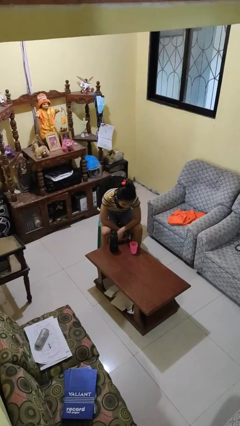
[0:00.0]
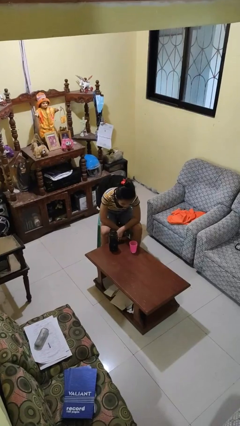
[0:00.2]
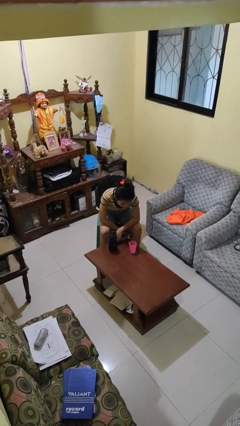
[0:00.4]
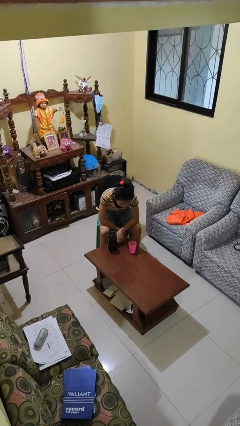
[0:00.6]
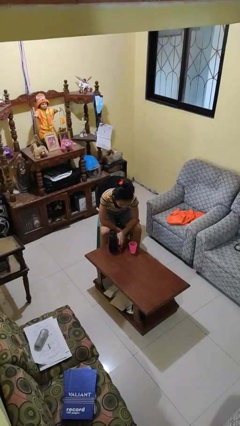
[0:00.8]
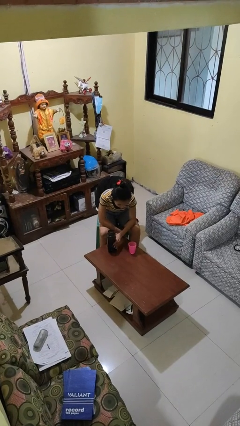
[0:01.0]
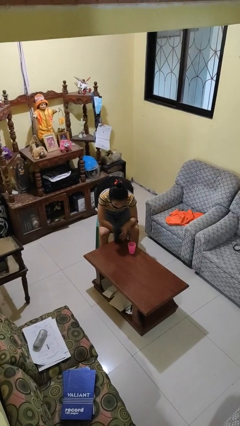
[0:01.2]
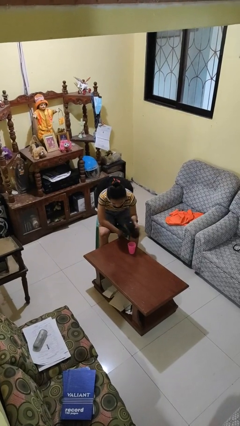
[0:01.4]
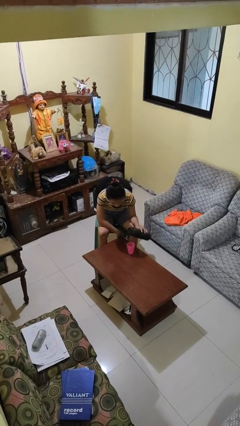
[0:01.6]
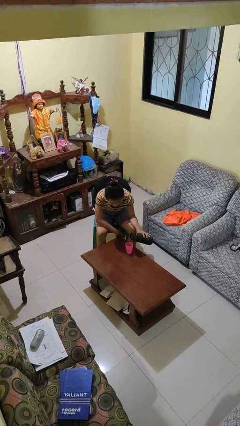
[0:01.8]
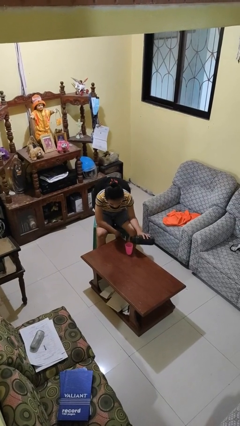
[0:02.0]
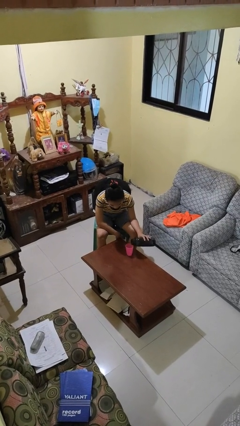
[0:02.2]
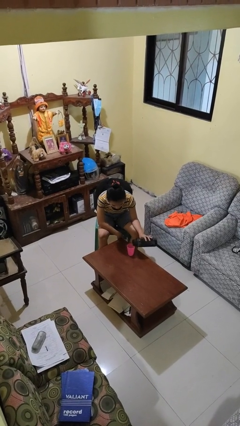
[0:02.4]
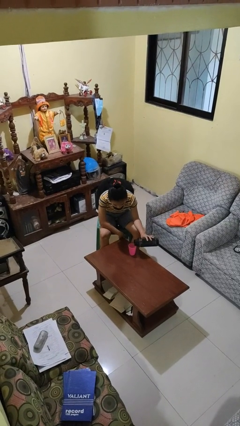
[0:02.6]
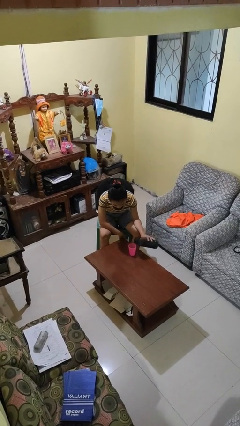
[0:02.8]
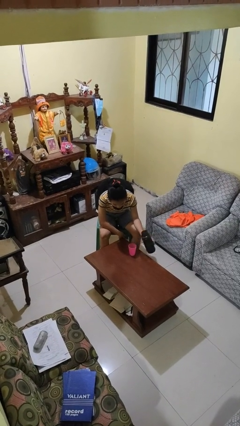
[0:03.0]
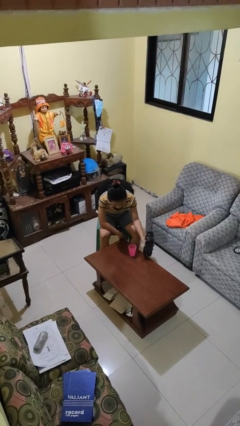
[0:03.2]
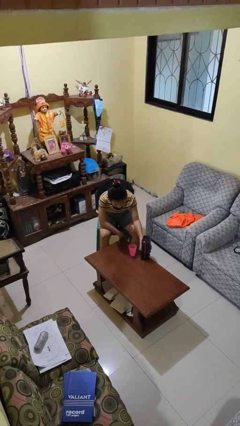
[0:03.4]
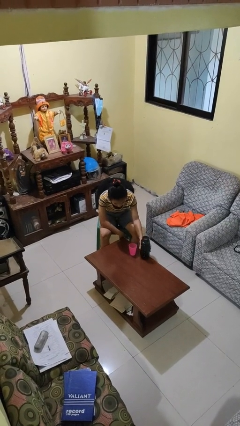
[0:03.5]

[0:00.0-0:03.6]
person pours liquid into cup

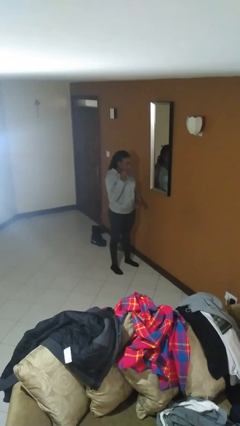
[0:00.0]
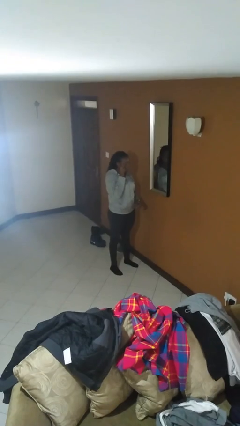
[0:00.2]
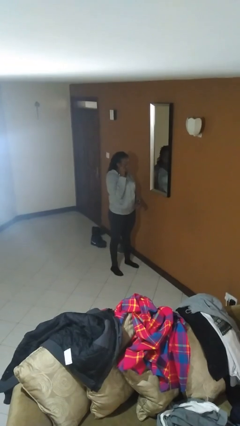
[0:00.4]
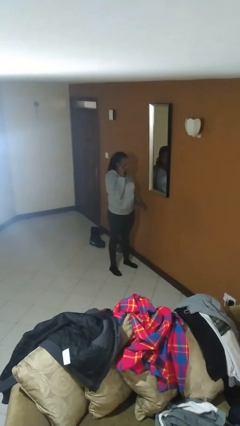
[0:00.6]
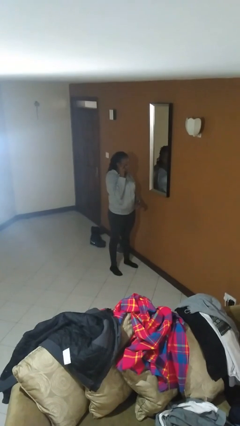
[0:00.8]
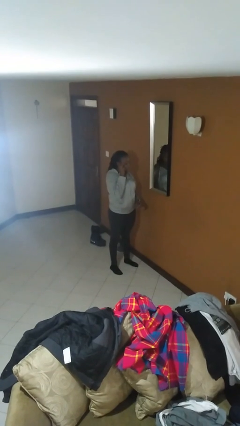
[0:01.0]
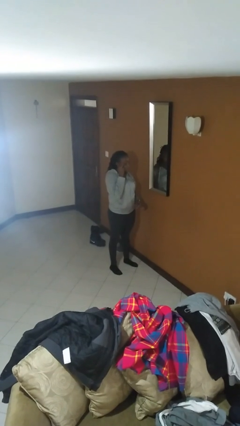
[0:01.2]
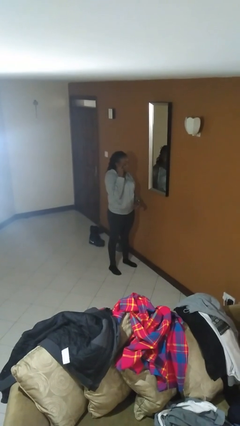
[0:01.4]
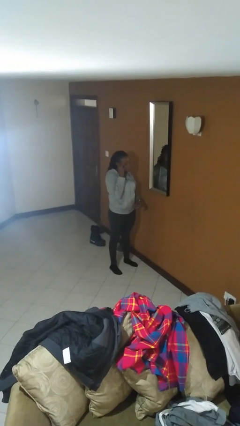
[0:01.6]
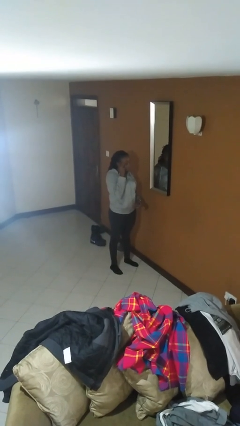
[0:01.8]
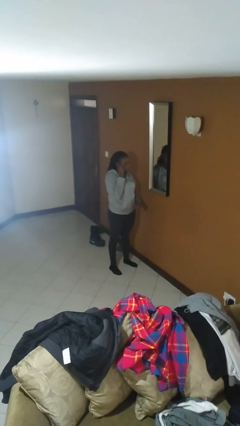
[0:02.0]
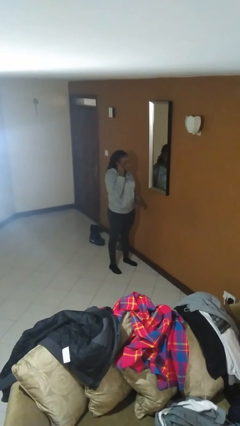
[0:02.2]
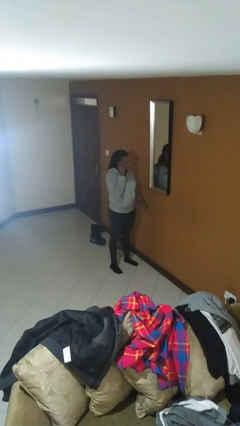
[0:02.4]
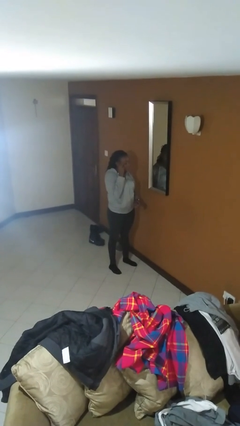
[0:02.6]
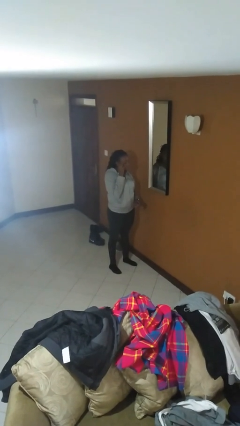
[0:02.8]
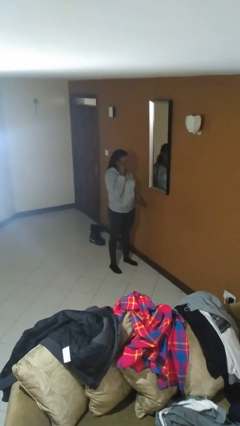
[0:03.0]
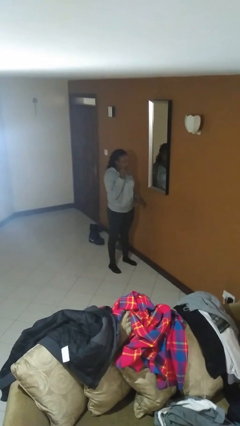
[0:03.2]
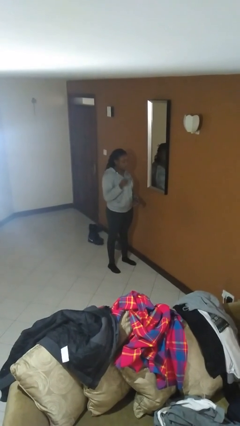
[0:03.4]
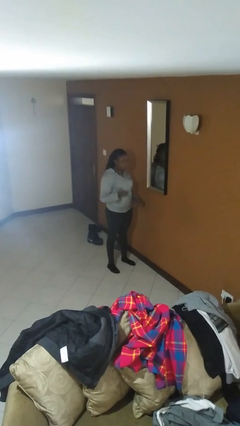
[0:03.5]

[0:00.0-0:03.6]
person applies eye makeup

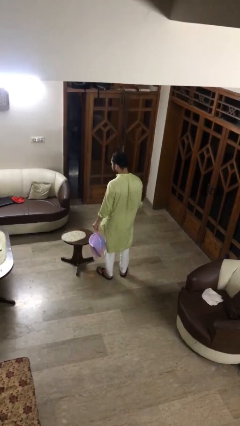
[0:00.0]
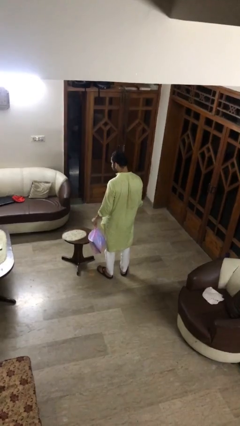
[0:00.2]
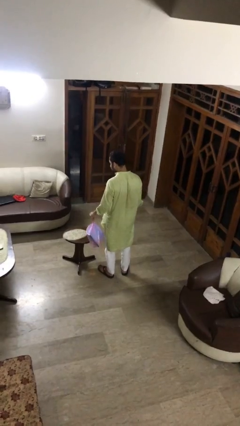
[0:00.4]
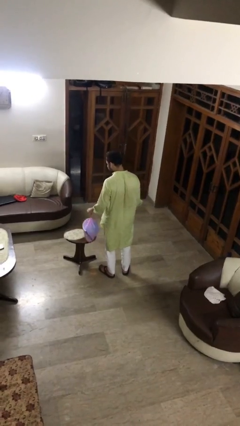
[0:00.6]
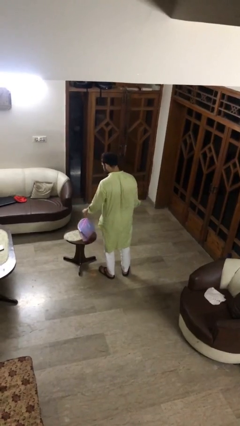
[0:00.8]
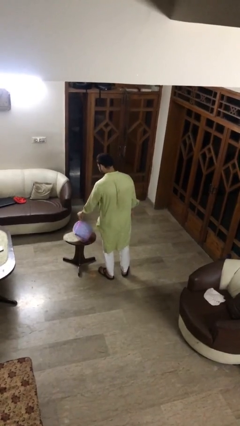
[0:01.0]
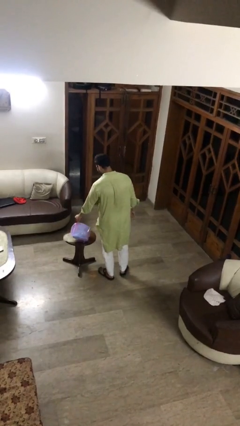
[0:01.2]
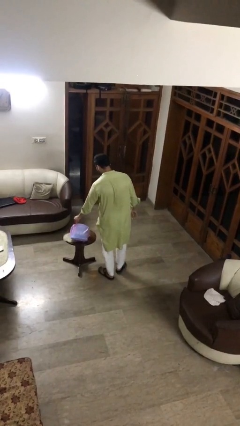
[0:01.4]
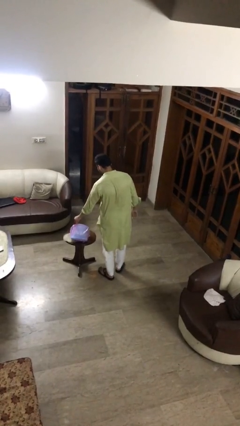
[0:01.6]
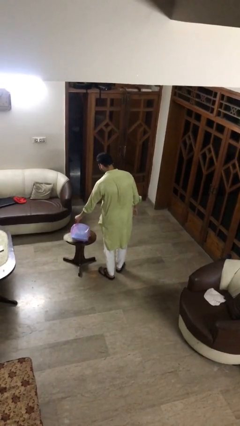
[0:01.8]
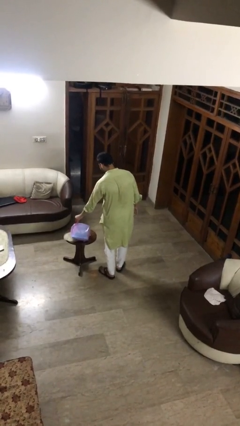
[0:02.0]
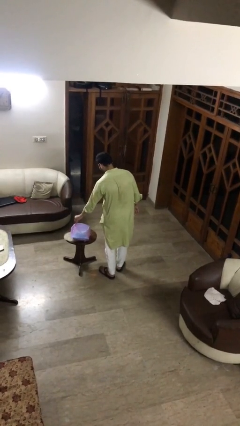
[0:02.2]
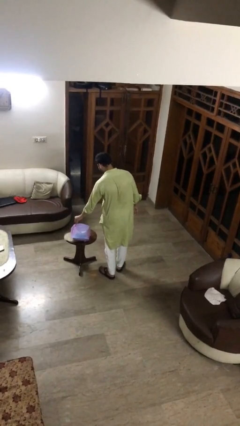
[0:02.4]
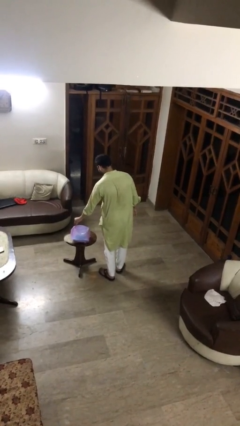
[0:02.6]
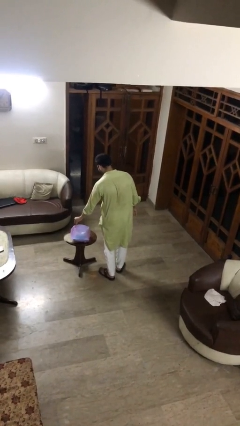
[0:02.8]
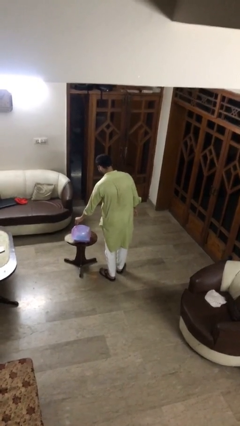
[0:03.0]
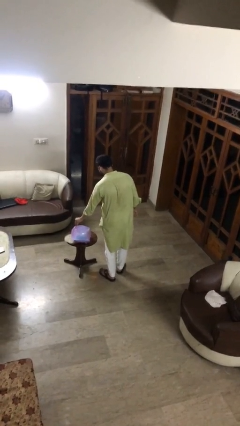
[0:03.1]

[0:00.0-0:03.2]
person puts down object on table

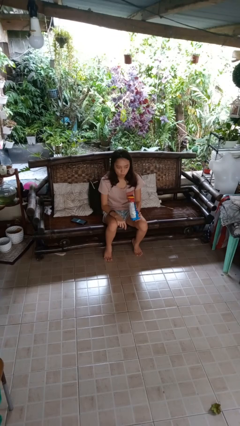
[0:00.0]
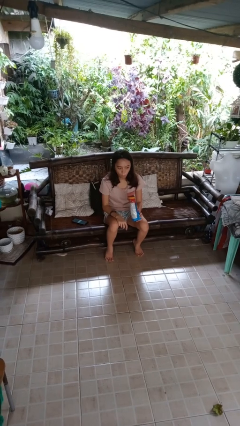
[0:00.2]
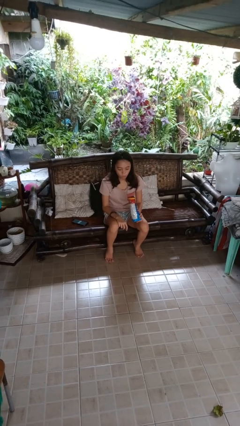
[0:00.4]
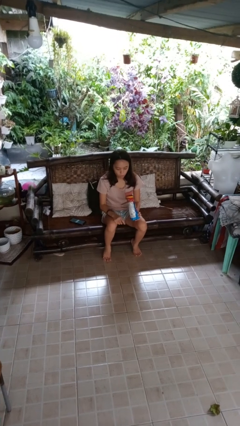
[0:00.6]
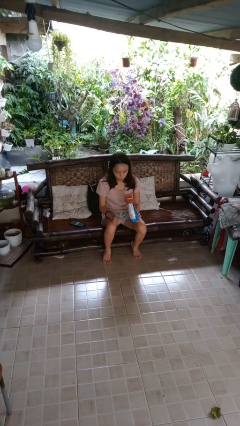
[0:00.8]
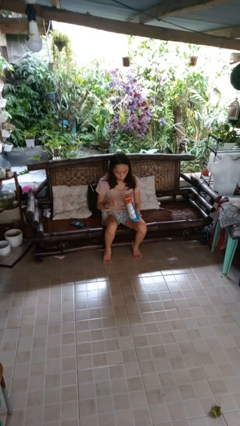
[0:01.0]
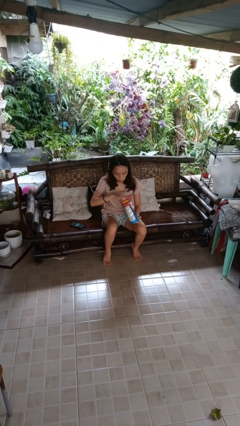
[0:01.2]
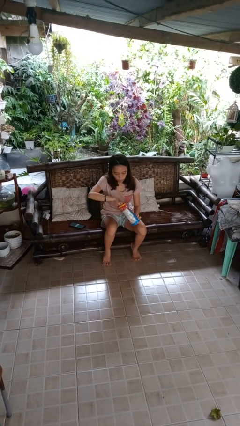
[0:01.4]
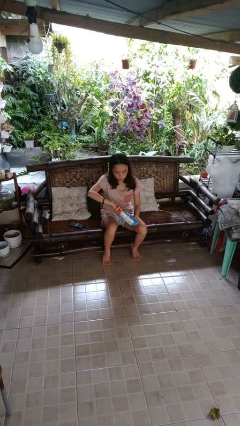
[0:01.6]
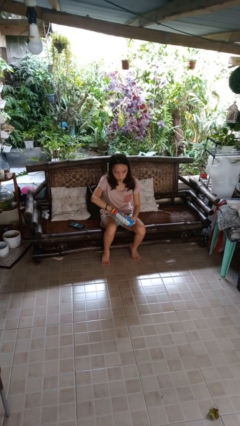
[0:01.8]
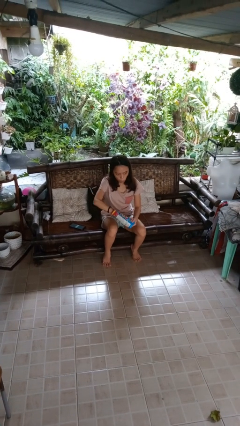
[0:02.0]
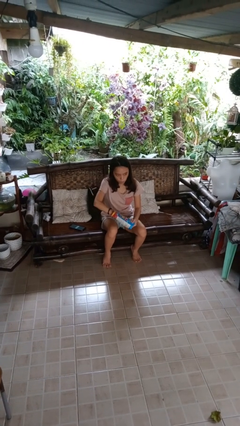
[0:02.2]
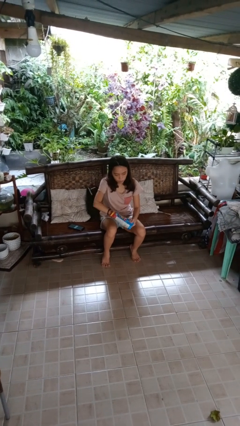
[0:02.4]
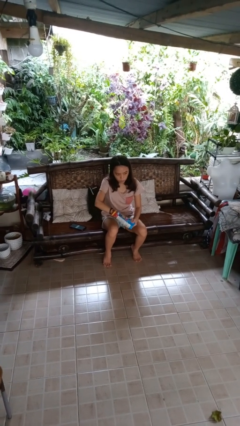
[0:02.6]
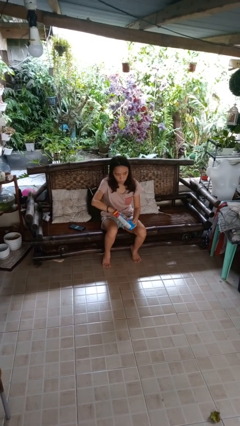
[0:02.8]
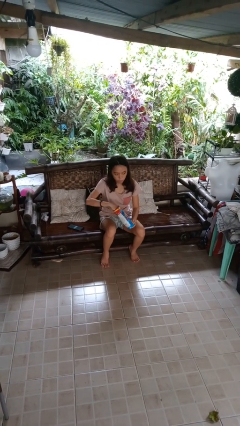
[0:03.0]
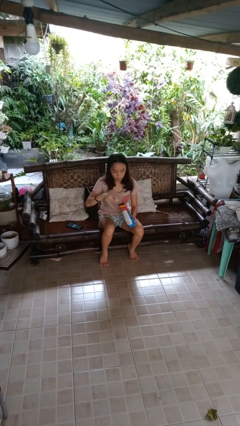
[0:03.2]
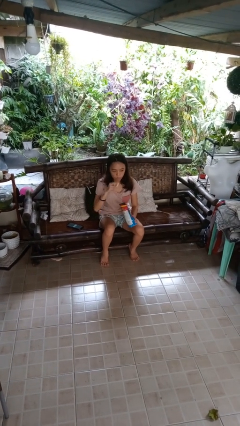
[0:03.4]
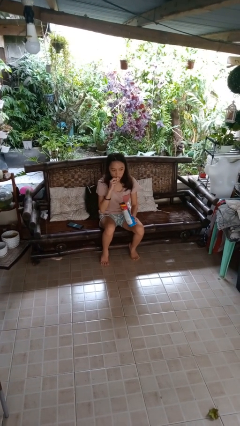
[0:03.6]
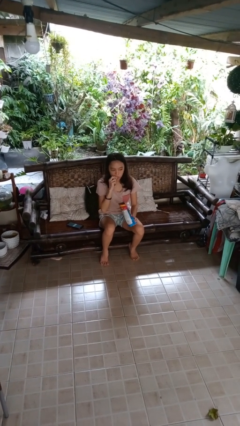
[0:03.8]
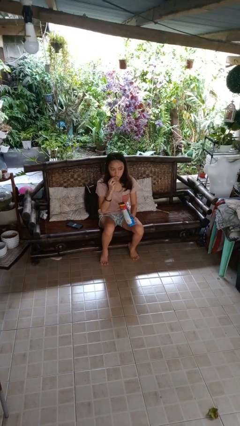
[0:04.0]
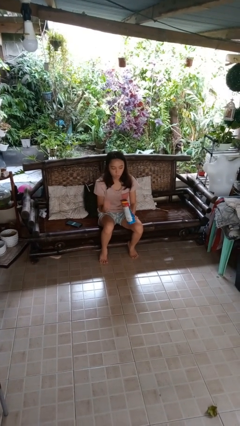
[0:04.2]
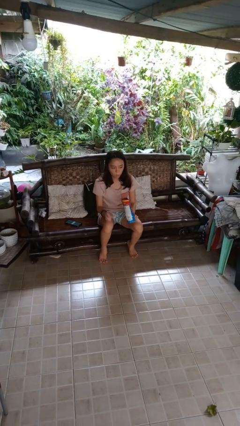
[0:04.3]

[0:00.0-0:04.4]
person eats snack from bag

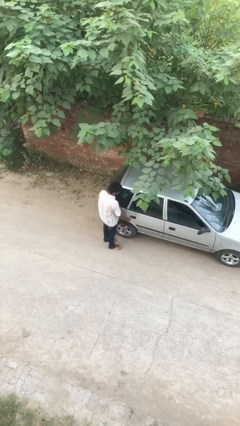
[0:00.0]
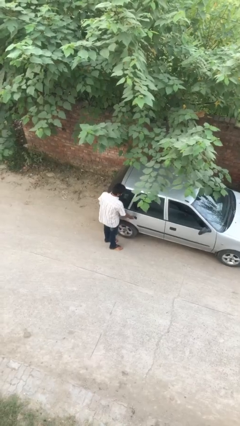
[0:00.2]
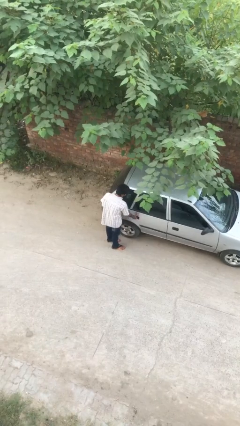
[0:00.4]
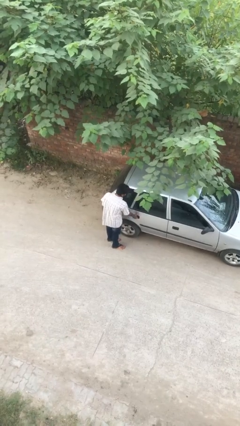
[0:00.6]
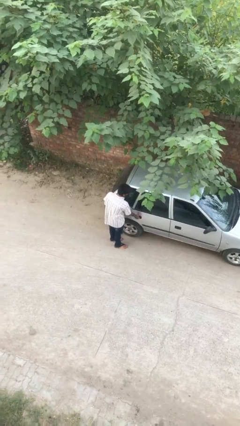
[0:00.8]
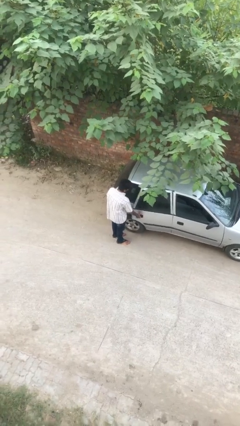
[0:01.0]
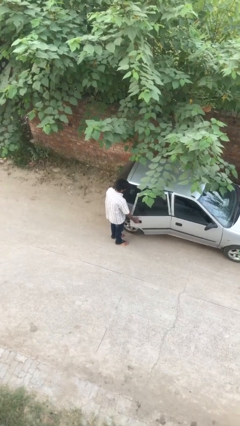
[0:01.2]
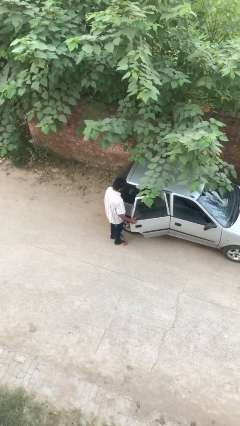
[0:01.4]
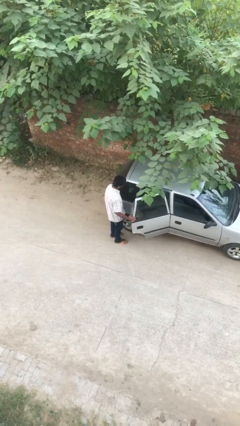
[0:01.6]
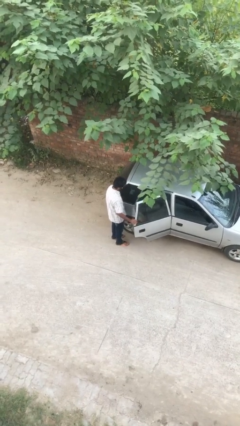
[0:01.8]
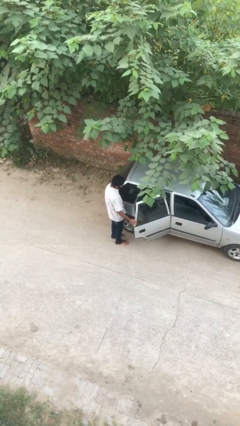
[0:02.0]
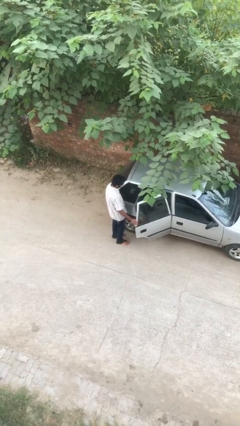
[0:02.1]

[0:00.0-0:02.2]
person opens car door

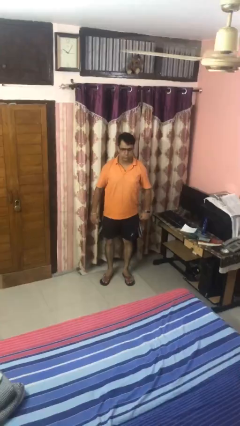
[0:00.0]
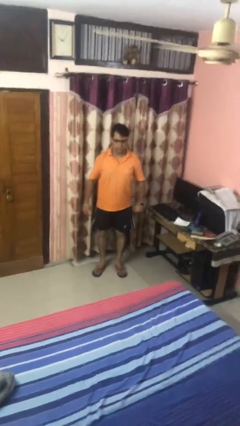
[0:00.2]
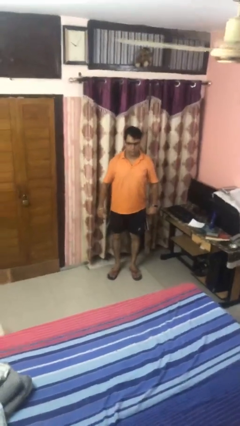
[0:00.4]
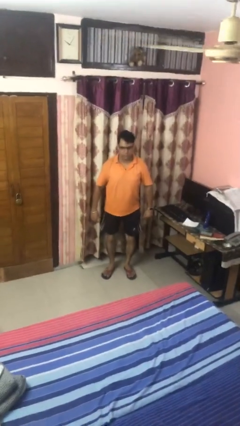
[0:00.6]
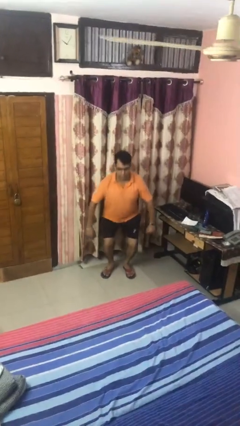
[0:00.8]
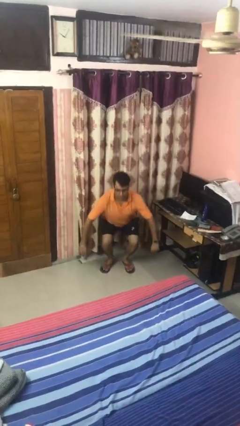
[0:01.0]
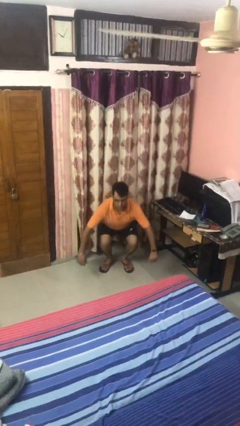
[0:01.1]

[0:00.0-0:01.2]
person squats
